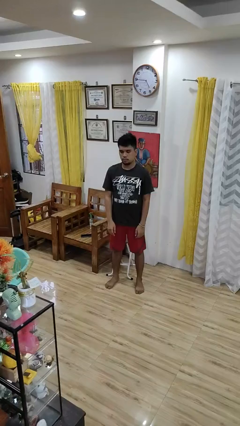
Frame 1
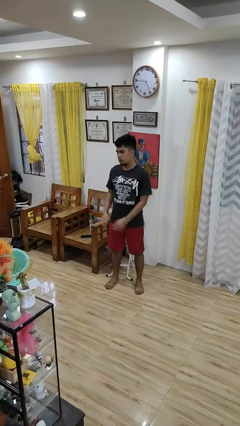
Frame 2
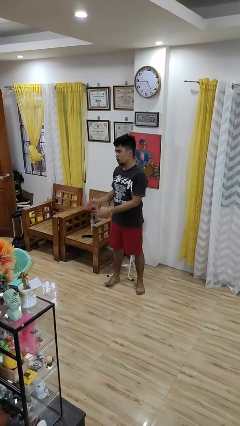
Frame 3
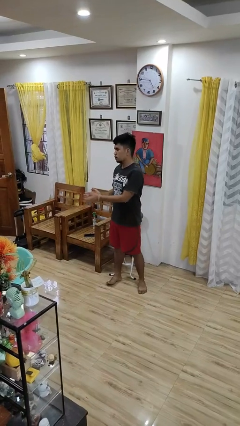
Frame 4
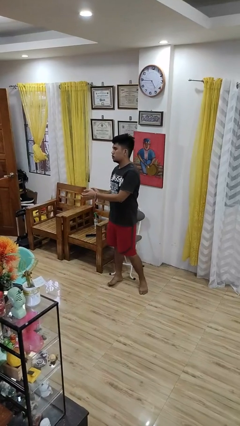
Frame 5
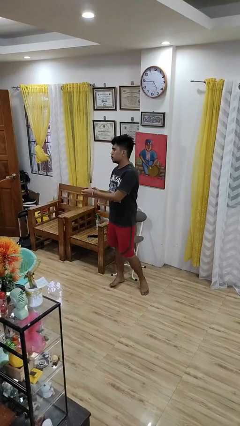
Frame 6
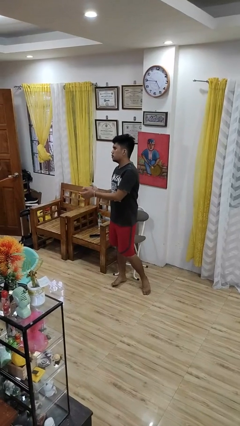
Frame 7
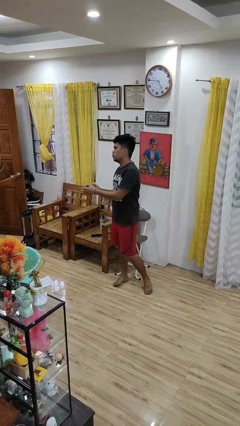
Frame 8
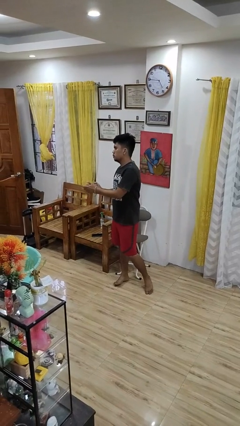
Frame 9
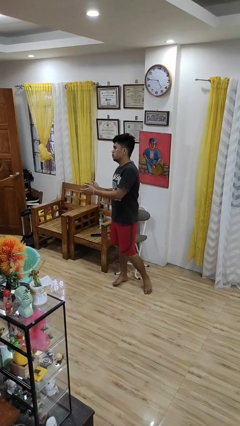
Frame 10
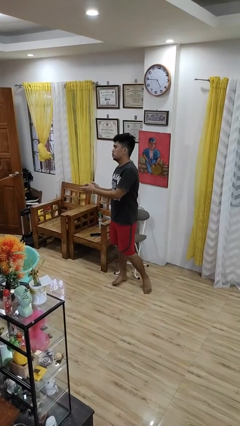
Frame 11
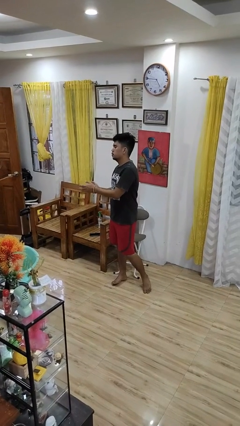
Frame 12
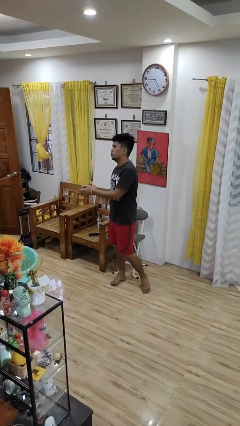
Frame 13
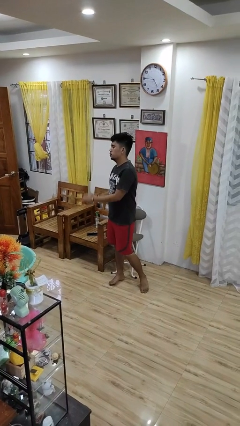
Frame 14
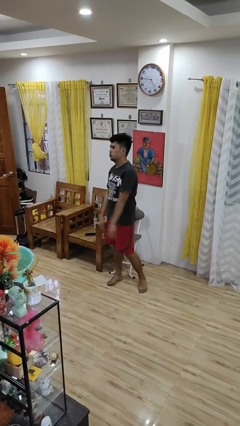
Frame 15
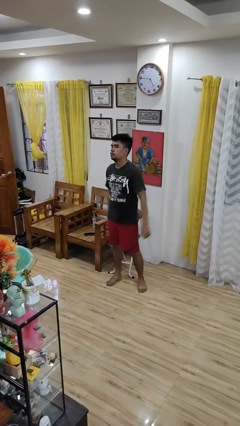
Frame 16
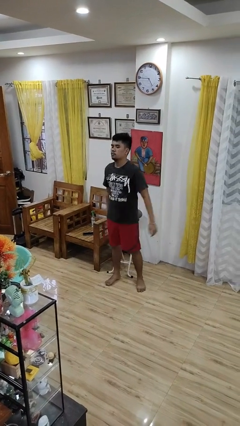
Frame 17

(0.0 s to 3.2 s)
person claps hands

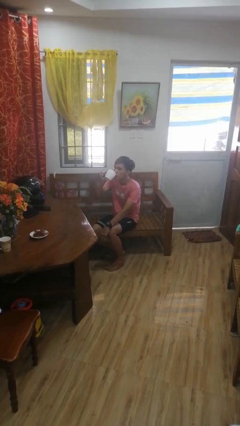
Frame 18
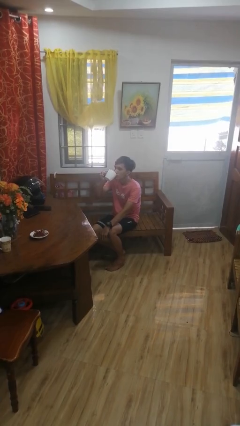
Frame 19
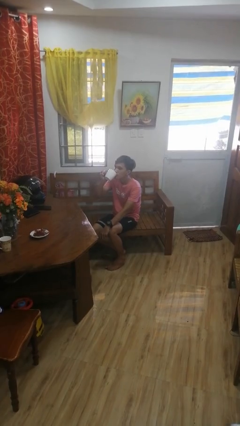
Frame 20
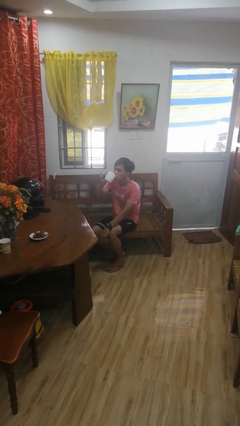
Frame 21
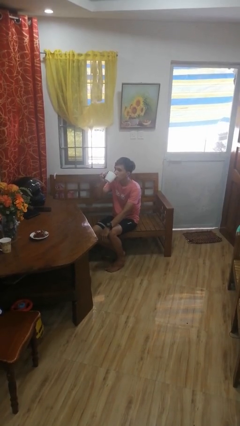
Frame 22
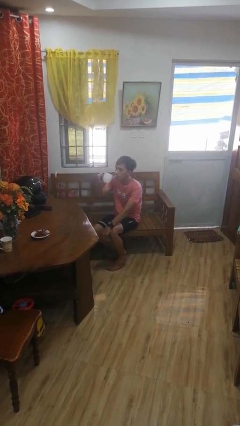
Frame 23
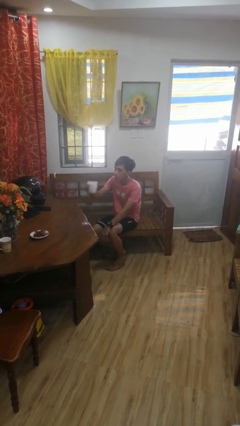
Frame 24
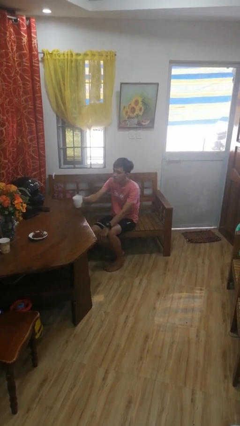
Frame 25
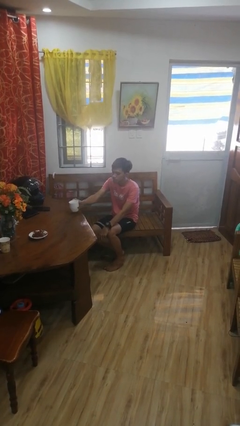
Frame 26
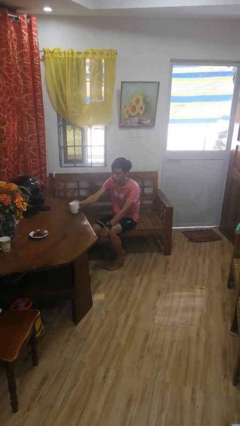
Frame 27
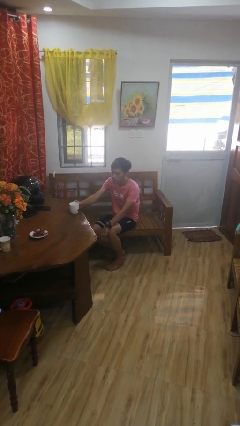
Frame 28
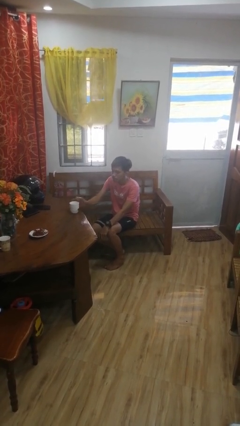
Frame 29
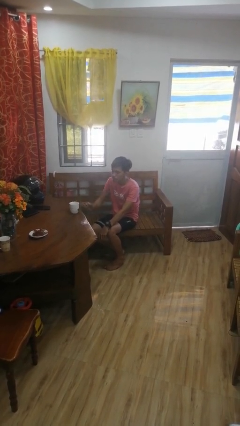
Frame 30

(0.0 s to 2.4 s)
person puts down object on table

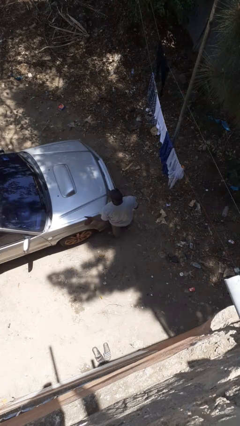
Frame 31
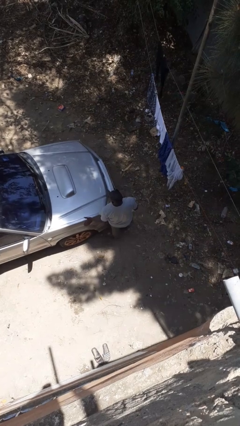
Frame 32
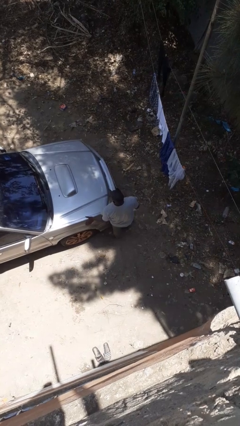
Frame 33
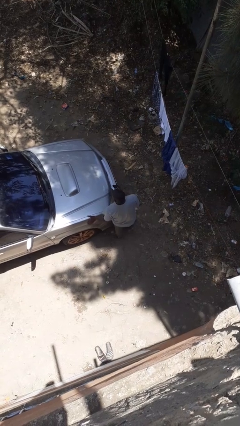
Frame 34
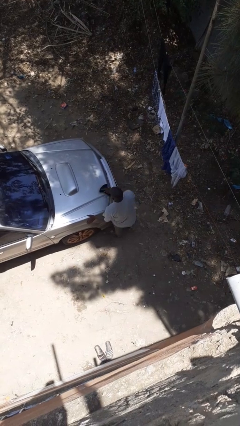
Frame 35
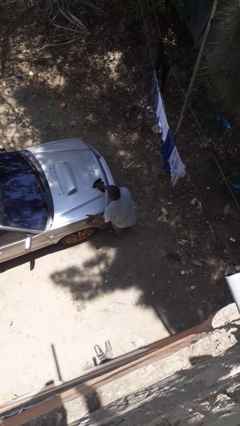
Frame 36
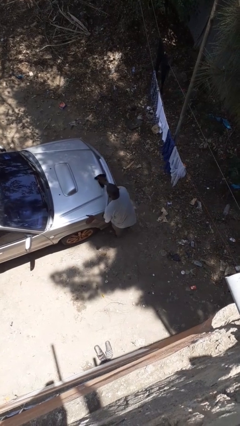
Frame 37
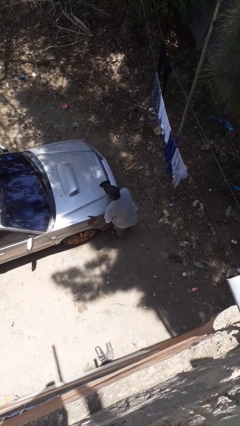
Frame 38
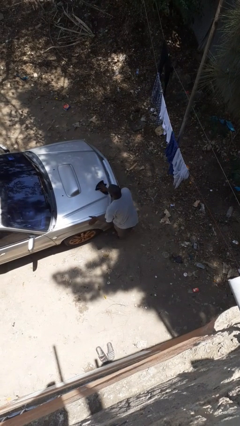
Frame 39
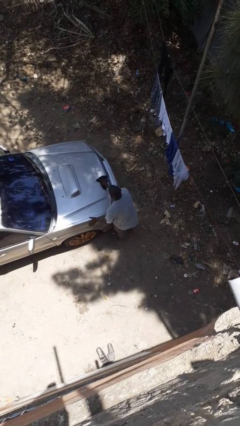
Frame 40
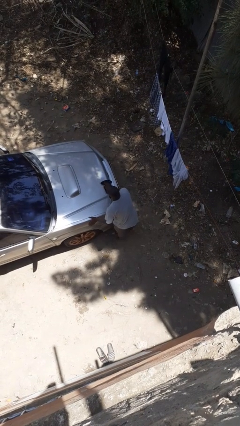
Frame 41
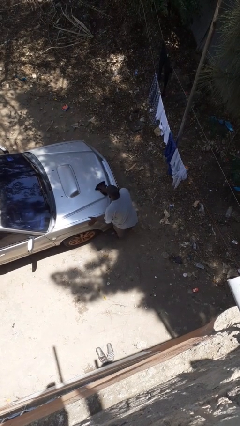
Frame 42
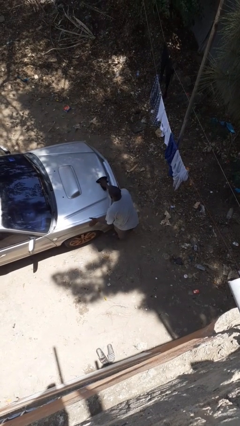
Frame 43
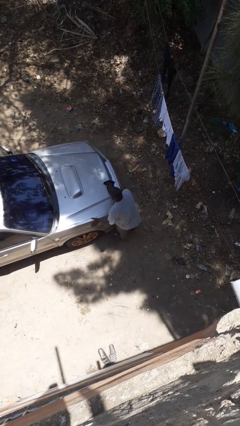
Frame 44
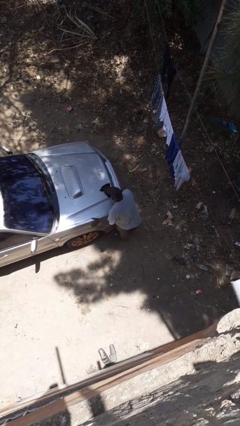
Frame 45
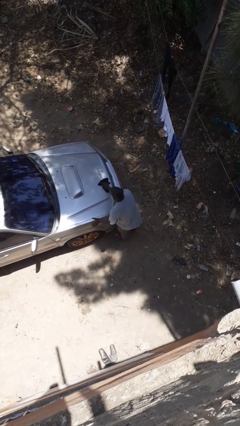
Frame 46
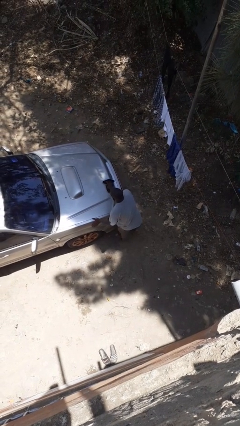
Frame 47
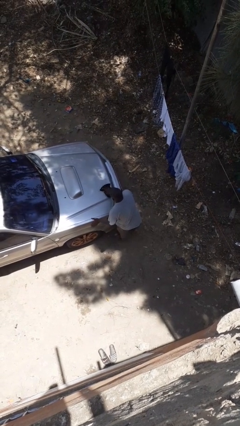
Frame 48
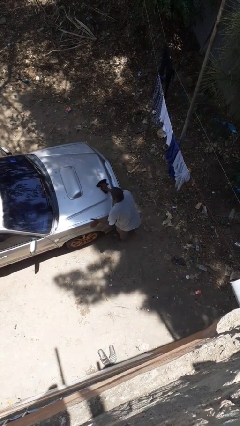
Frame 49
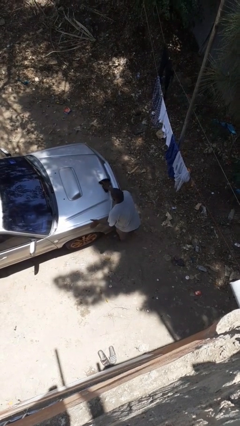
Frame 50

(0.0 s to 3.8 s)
person polishes car with rag

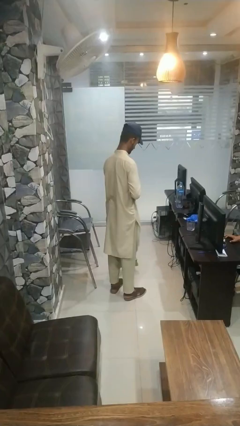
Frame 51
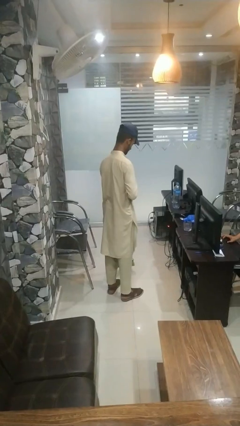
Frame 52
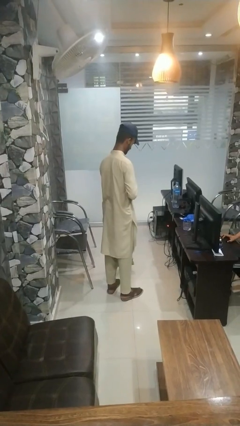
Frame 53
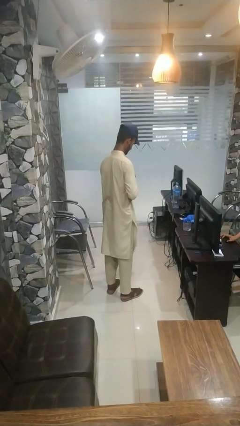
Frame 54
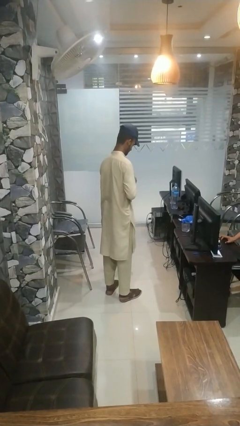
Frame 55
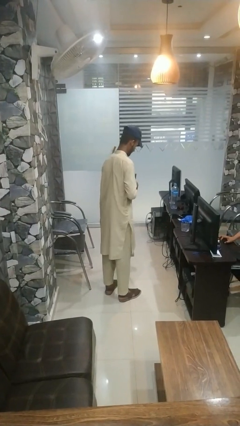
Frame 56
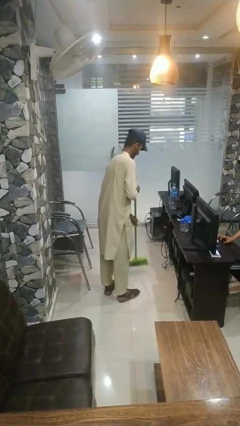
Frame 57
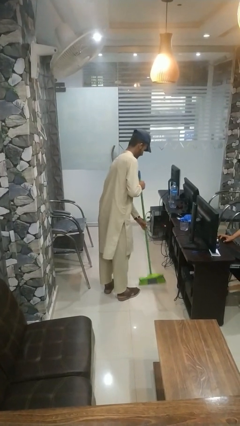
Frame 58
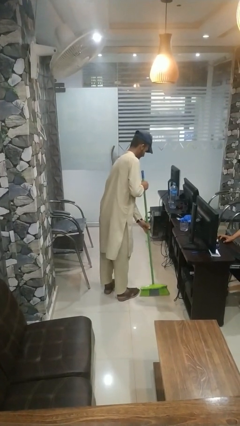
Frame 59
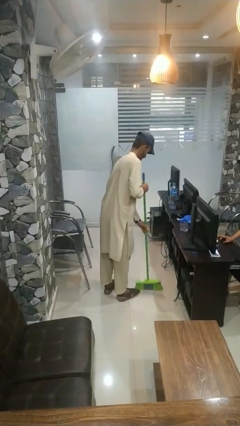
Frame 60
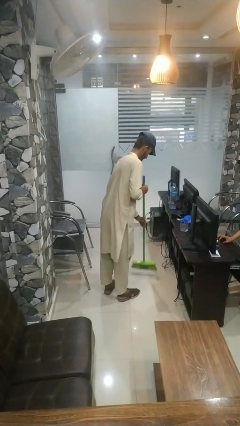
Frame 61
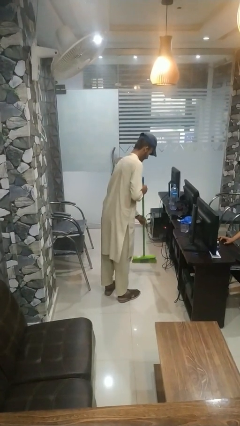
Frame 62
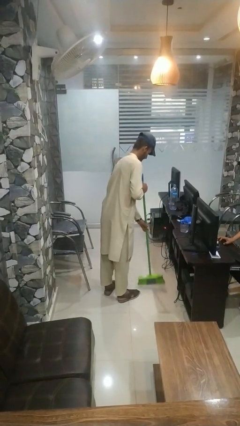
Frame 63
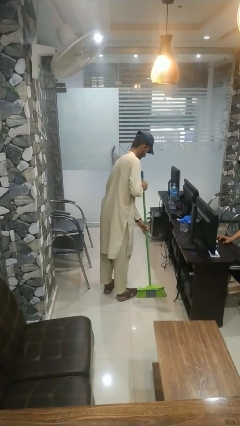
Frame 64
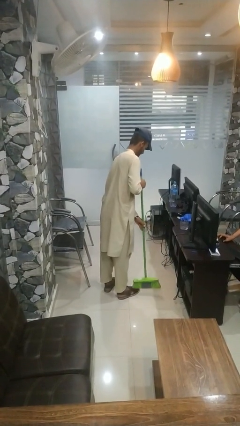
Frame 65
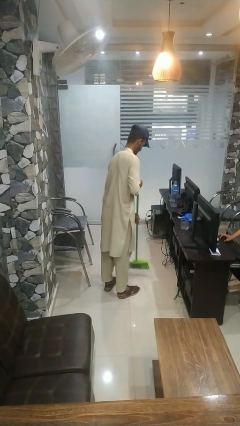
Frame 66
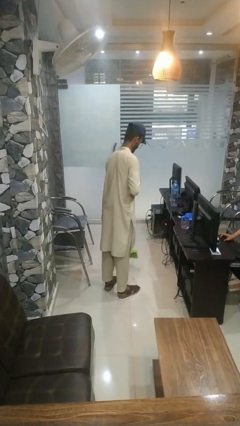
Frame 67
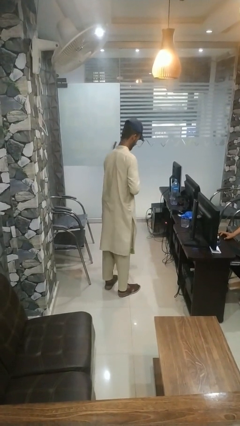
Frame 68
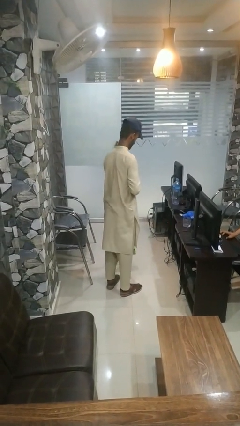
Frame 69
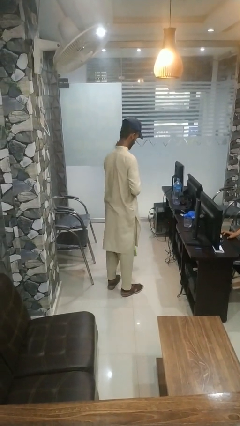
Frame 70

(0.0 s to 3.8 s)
person sweeps floor

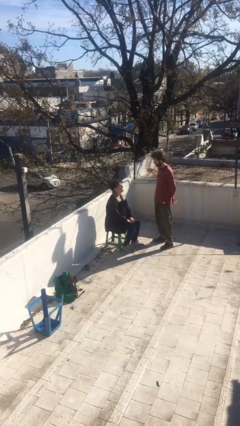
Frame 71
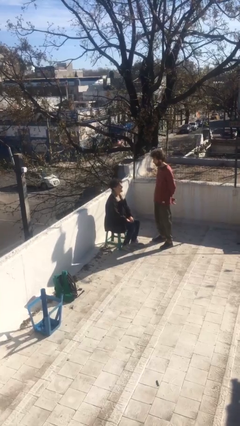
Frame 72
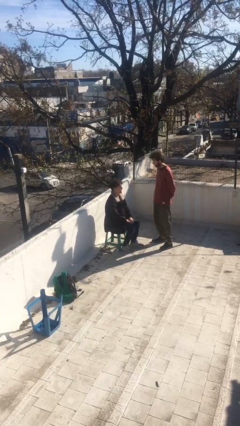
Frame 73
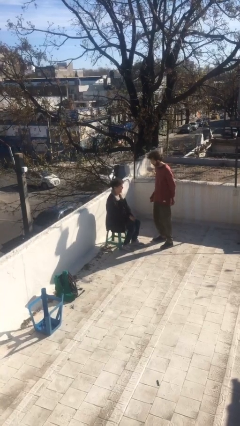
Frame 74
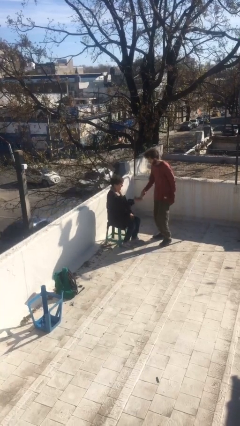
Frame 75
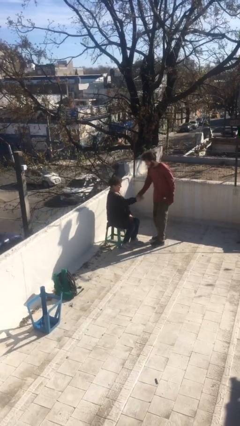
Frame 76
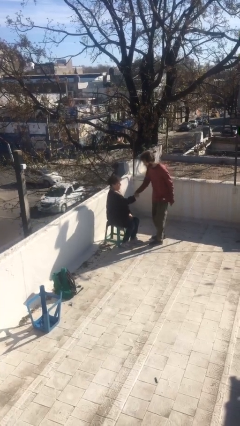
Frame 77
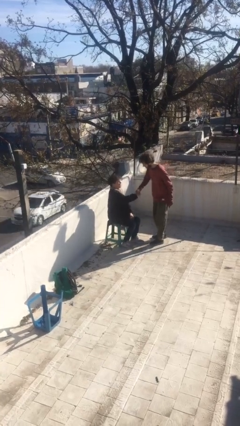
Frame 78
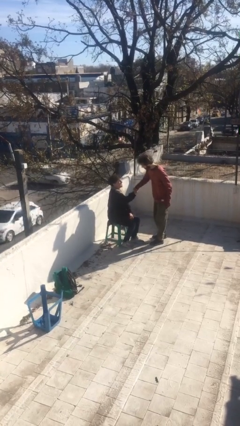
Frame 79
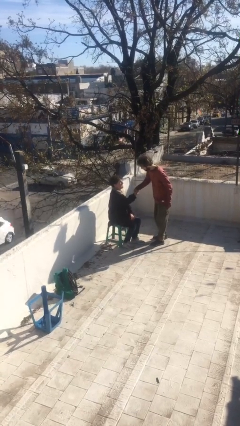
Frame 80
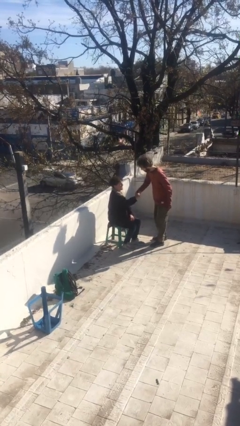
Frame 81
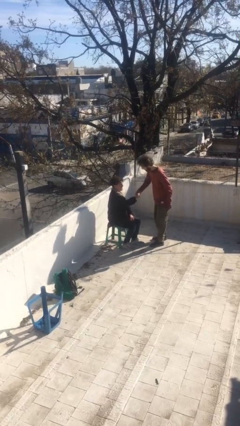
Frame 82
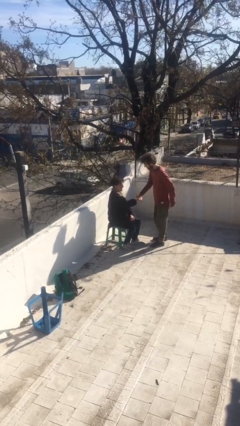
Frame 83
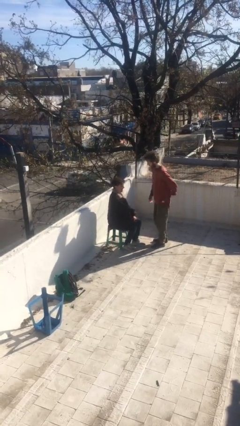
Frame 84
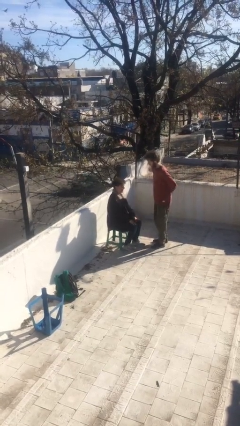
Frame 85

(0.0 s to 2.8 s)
person shakes hand

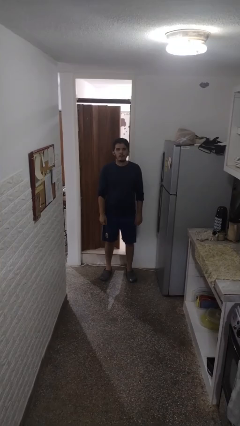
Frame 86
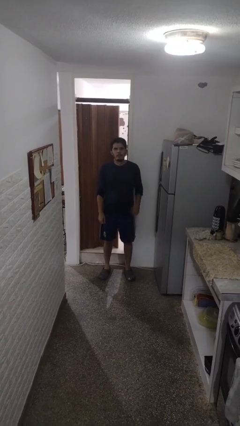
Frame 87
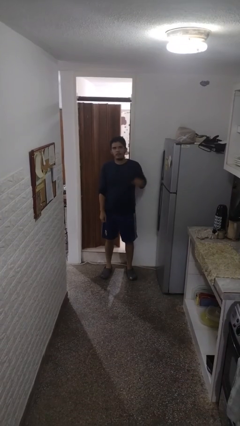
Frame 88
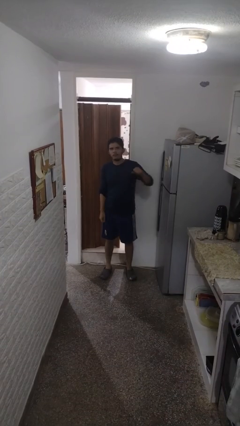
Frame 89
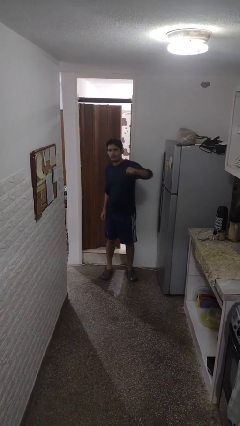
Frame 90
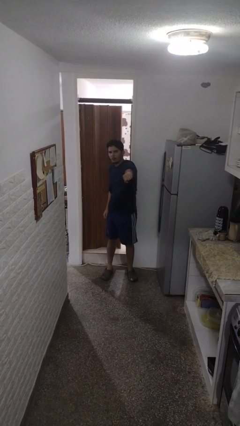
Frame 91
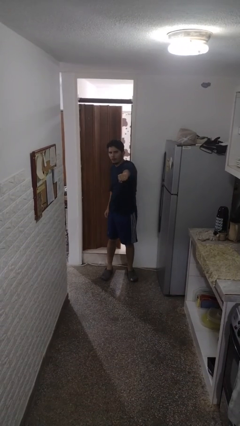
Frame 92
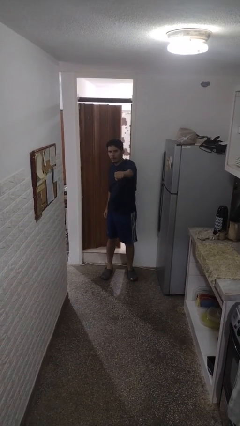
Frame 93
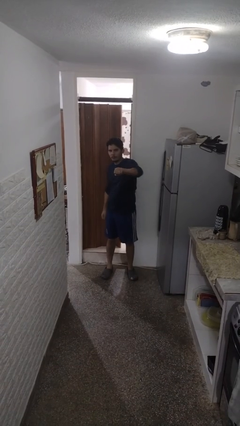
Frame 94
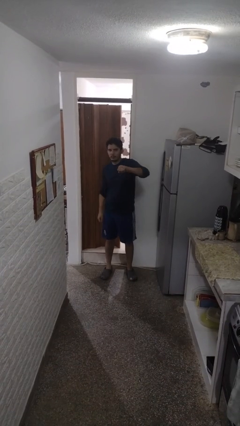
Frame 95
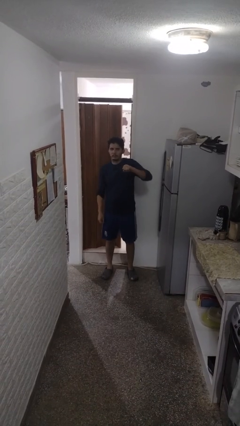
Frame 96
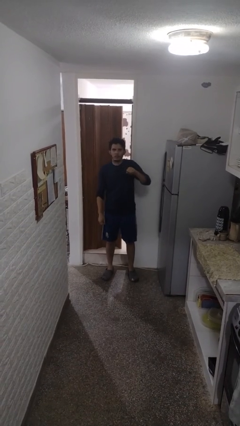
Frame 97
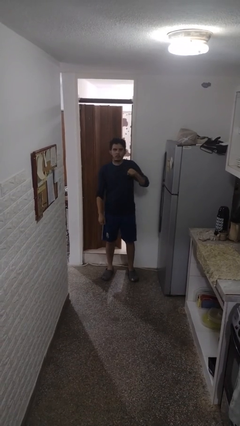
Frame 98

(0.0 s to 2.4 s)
person punches
